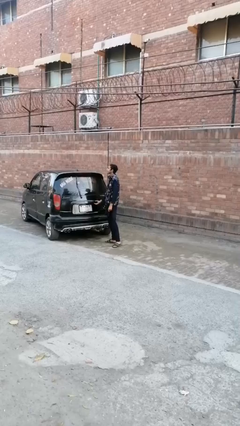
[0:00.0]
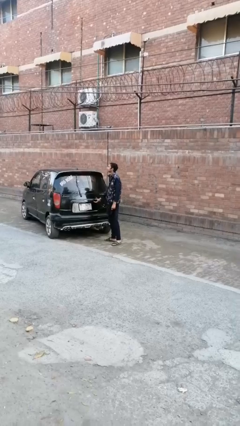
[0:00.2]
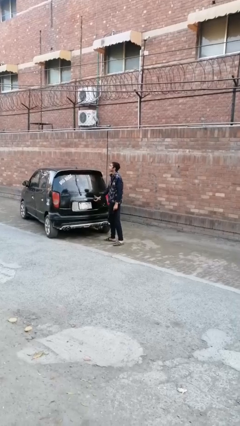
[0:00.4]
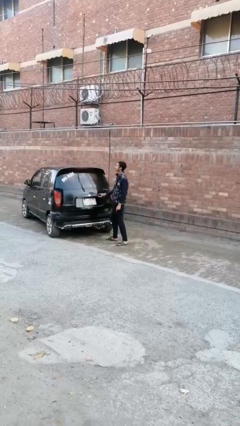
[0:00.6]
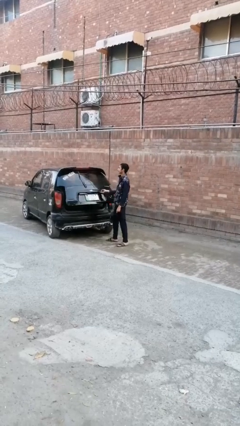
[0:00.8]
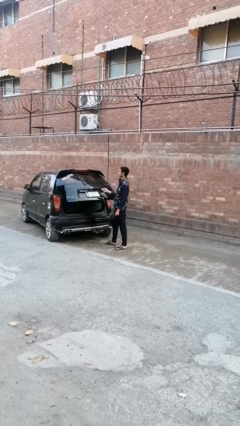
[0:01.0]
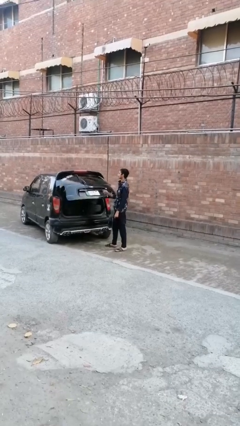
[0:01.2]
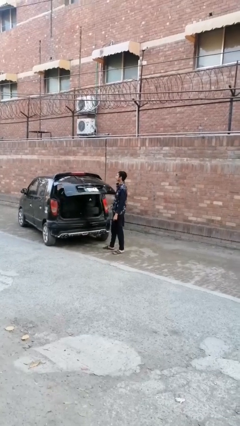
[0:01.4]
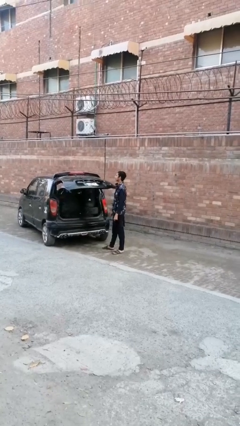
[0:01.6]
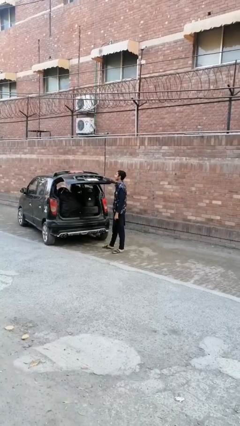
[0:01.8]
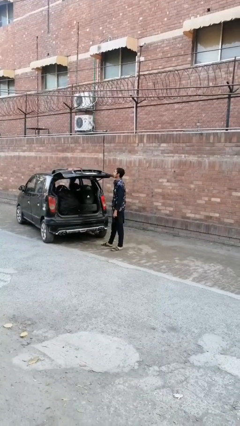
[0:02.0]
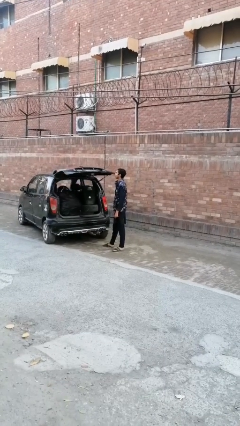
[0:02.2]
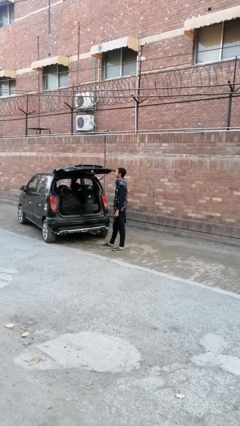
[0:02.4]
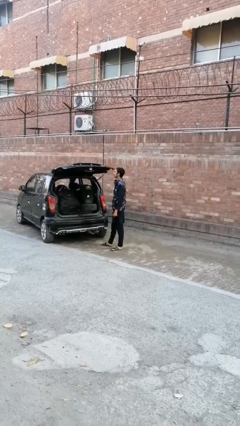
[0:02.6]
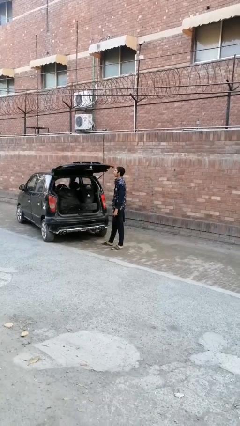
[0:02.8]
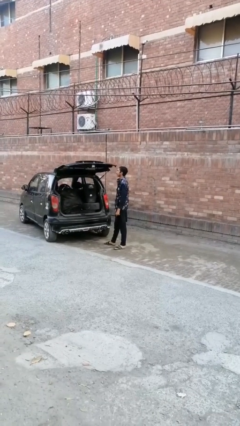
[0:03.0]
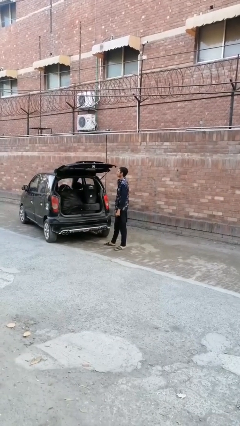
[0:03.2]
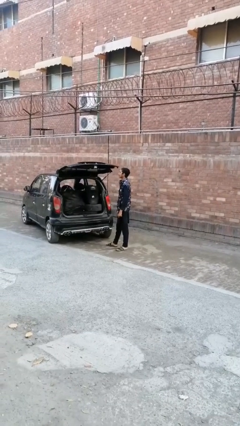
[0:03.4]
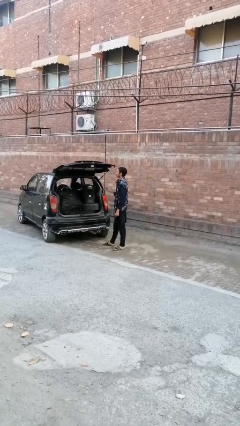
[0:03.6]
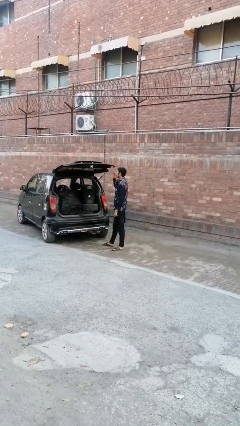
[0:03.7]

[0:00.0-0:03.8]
person opens car trunk

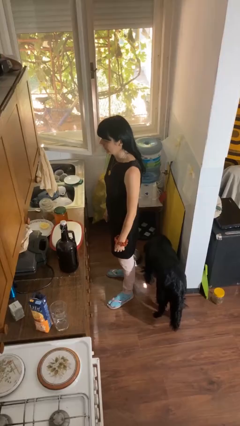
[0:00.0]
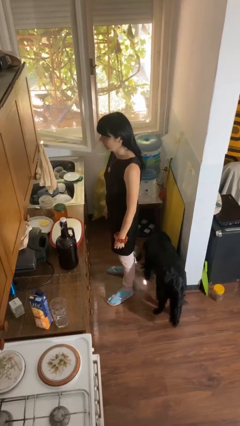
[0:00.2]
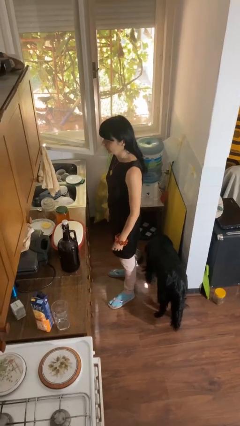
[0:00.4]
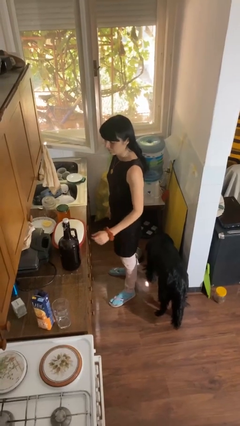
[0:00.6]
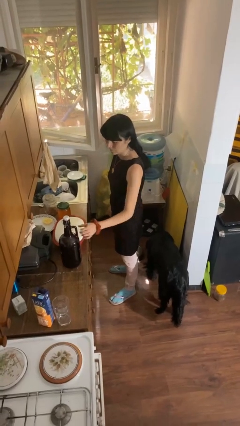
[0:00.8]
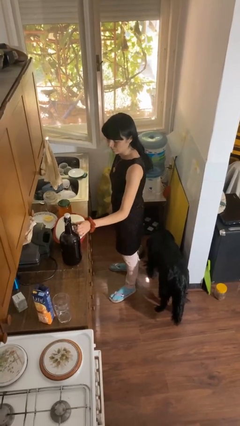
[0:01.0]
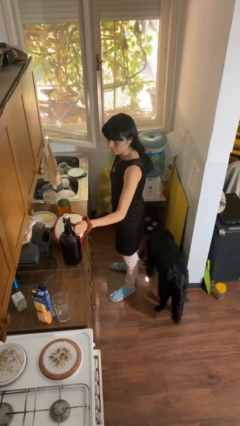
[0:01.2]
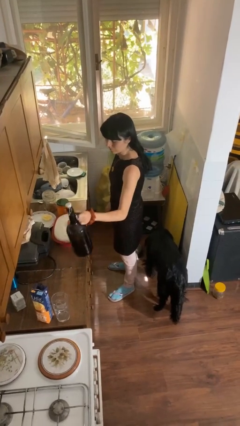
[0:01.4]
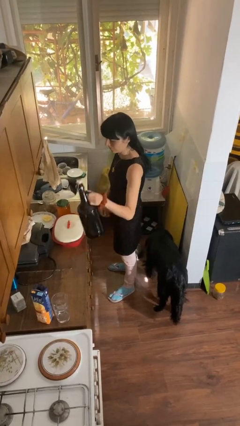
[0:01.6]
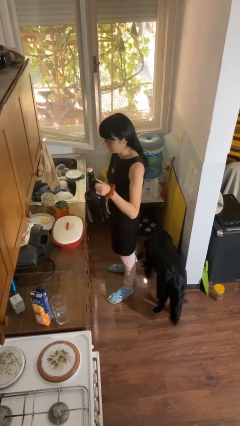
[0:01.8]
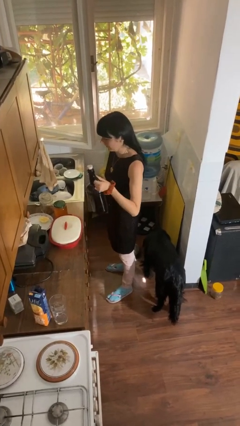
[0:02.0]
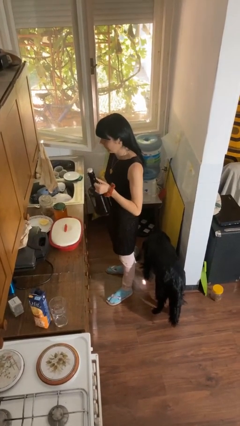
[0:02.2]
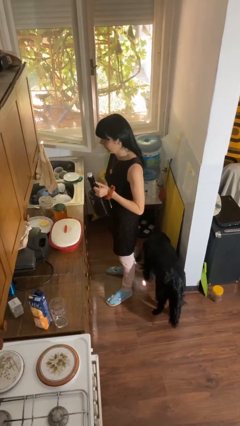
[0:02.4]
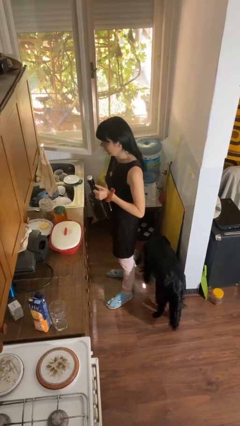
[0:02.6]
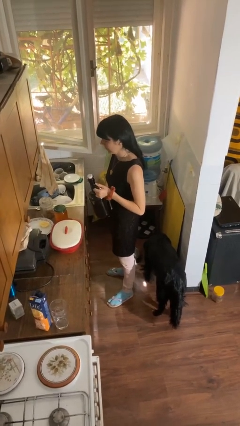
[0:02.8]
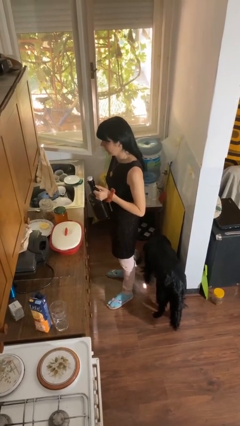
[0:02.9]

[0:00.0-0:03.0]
person picks up object from countertop

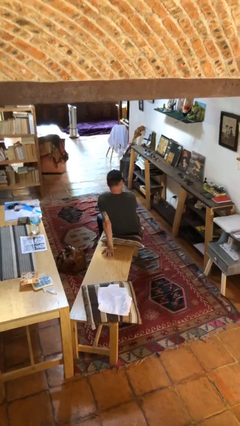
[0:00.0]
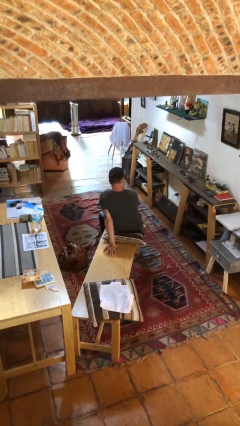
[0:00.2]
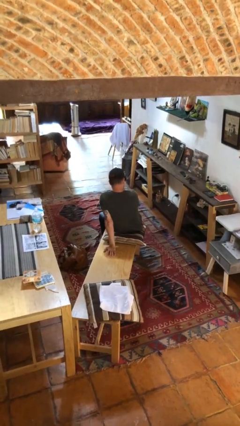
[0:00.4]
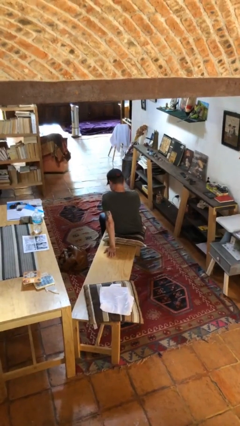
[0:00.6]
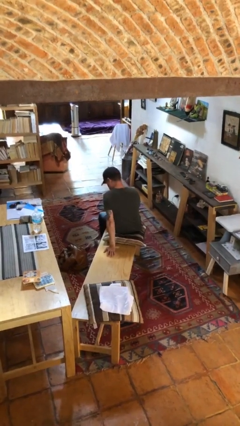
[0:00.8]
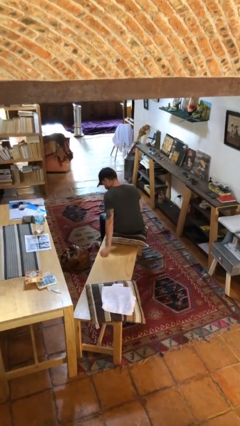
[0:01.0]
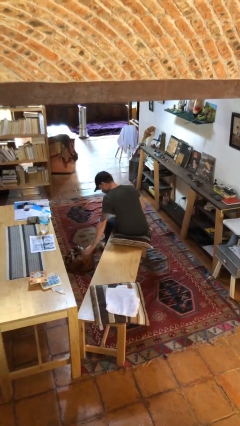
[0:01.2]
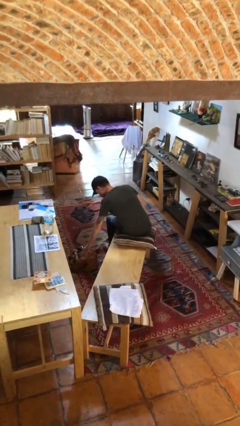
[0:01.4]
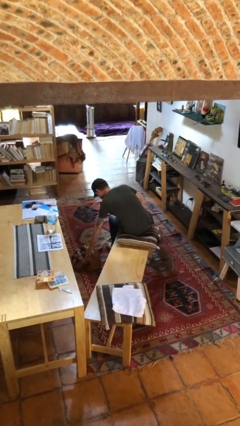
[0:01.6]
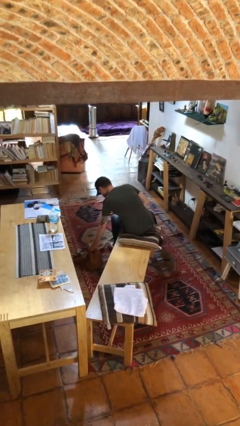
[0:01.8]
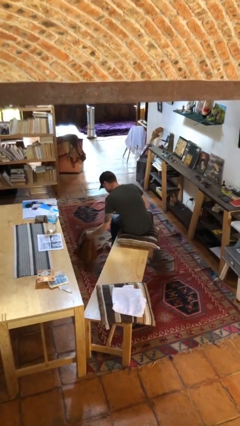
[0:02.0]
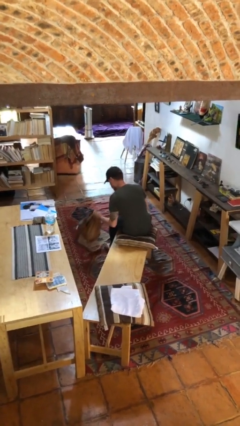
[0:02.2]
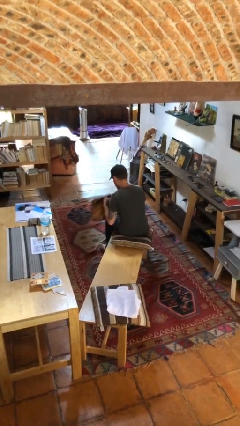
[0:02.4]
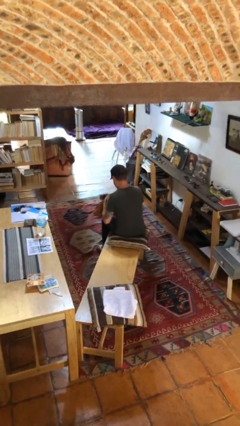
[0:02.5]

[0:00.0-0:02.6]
person picks up object from floor

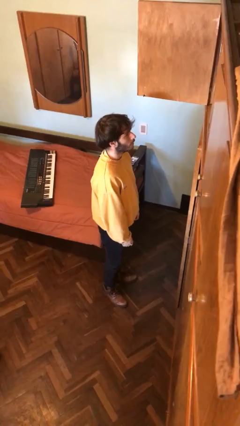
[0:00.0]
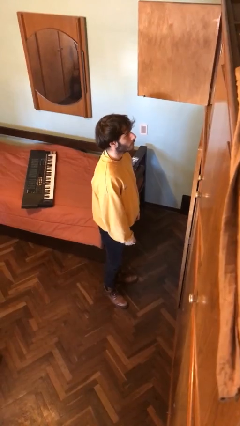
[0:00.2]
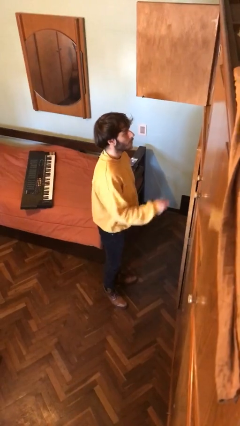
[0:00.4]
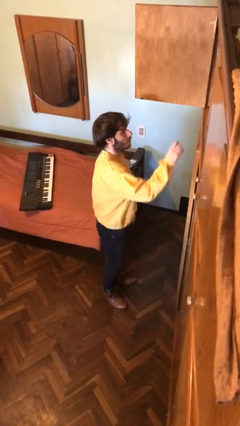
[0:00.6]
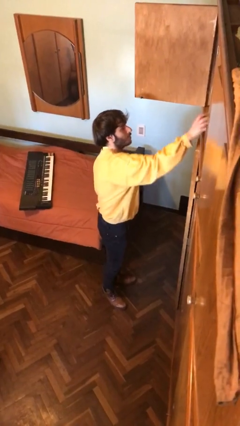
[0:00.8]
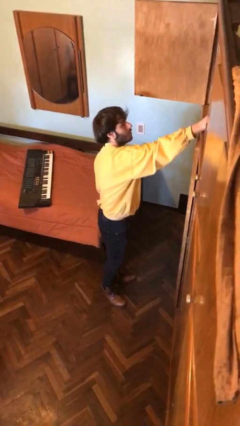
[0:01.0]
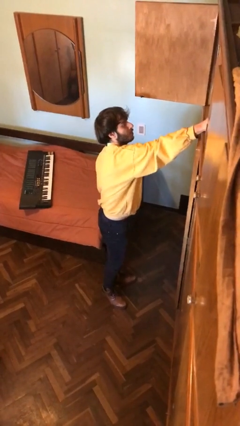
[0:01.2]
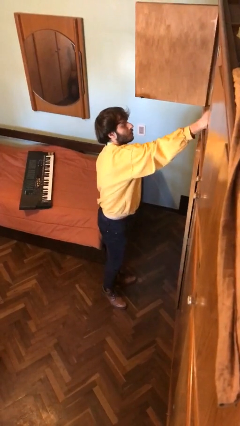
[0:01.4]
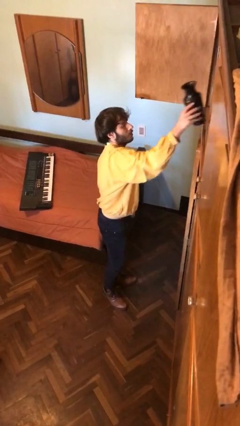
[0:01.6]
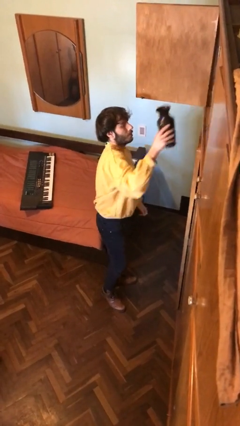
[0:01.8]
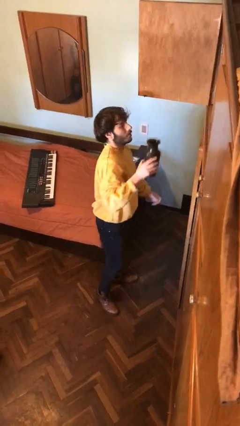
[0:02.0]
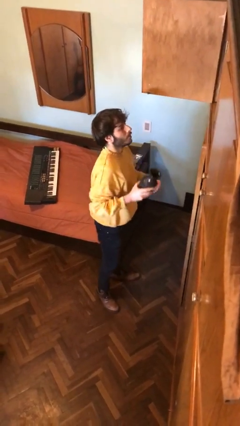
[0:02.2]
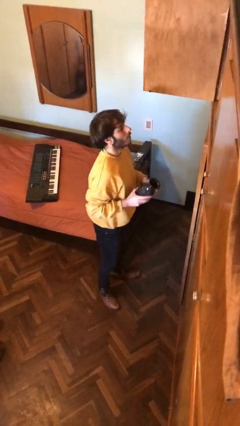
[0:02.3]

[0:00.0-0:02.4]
person picks up object from cabinet

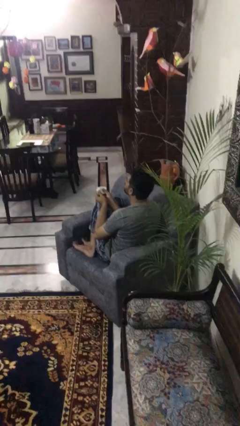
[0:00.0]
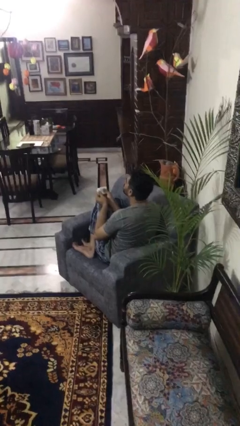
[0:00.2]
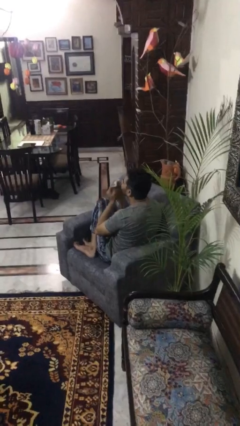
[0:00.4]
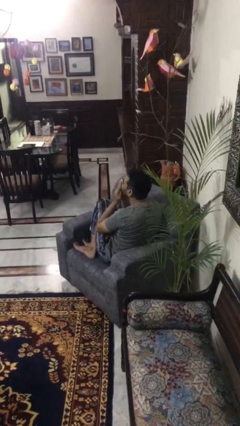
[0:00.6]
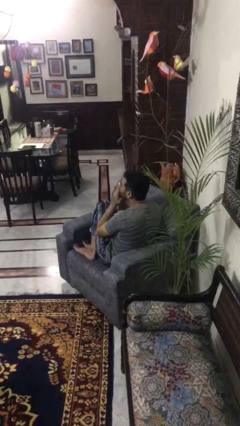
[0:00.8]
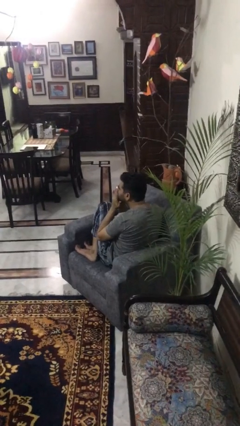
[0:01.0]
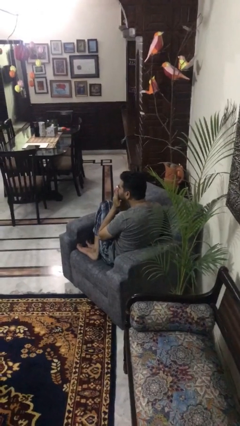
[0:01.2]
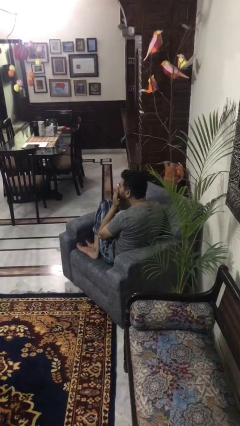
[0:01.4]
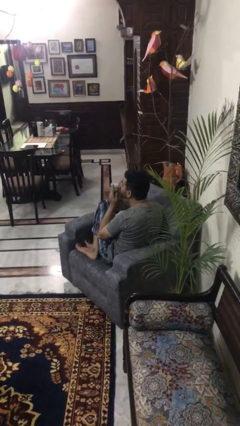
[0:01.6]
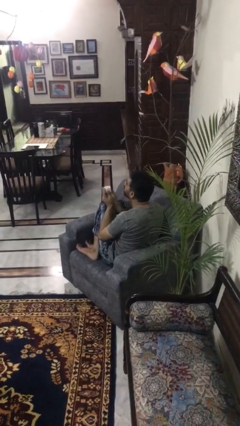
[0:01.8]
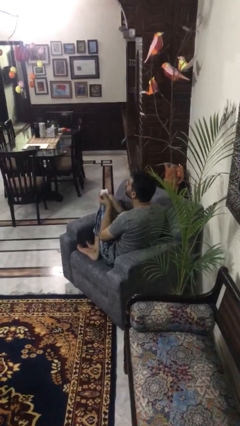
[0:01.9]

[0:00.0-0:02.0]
person blows nose

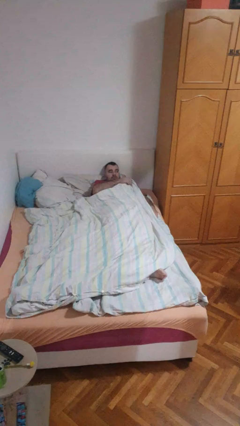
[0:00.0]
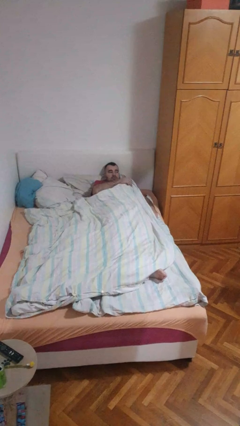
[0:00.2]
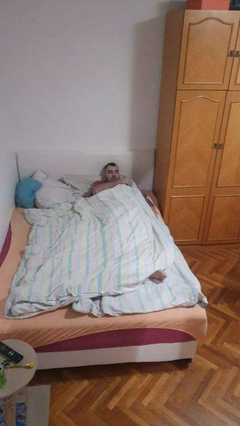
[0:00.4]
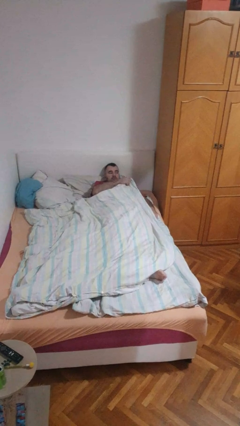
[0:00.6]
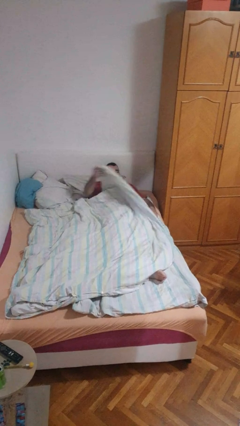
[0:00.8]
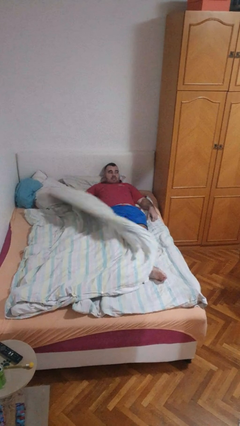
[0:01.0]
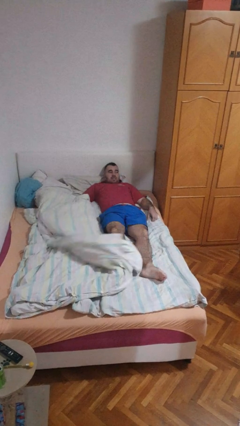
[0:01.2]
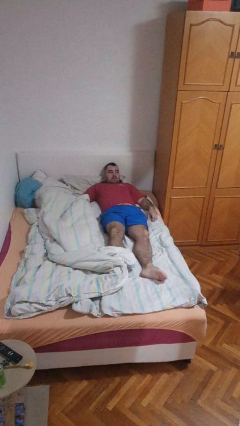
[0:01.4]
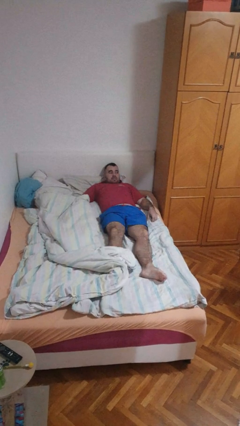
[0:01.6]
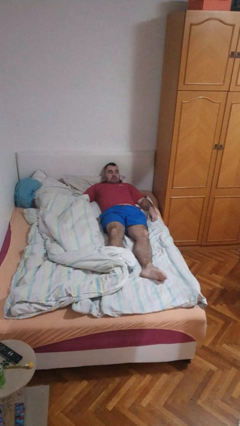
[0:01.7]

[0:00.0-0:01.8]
person uncovers with bedsheets

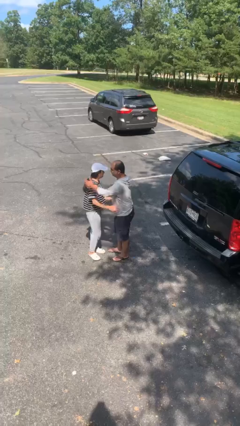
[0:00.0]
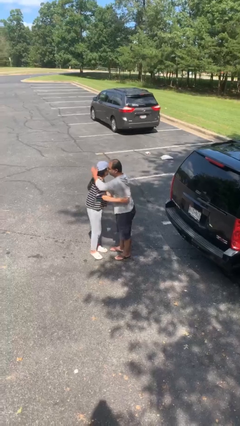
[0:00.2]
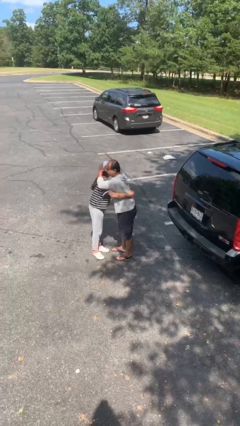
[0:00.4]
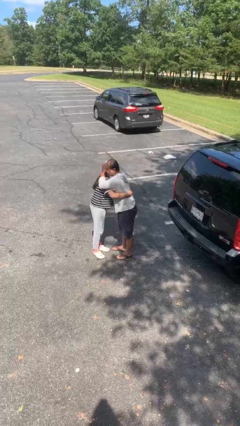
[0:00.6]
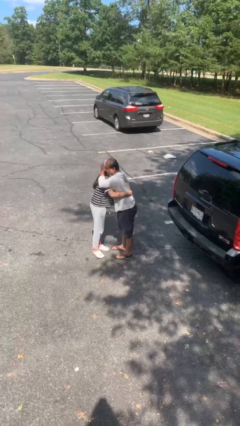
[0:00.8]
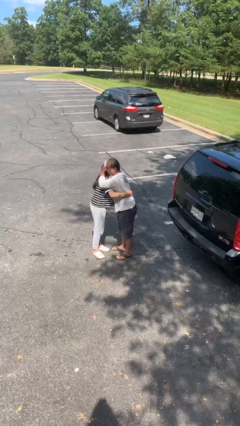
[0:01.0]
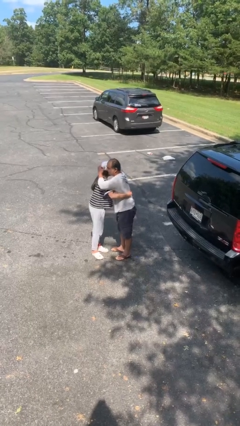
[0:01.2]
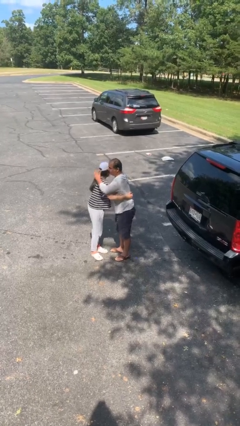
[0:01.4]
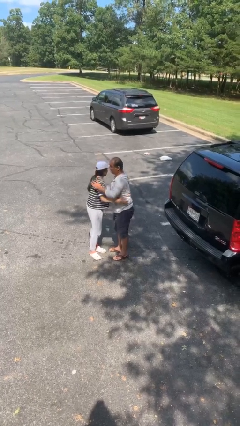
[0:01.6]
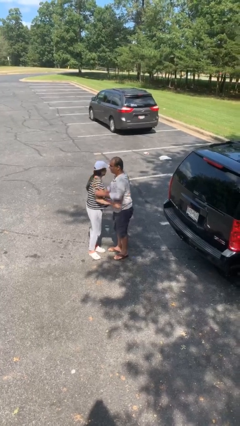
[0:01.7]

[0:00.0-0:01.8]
person embraces person
